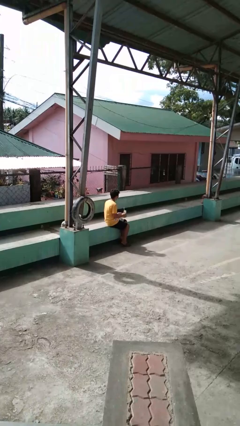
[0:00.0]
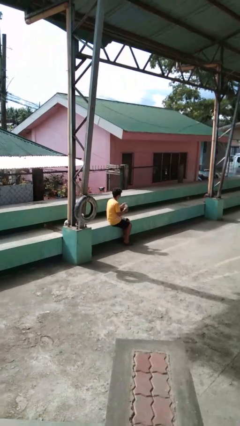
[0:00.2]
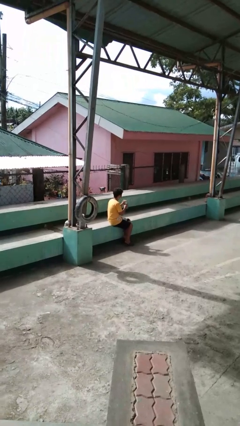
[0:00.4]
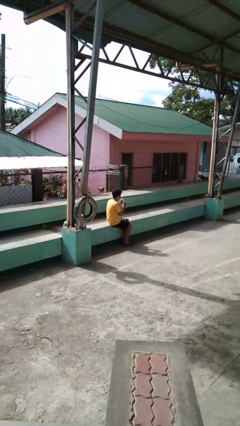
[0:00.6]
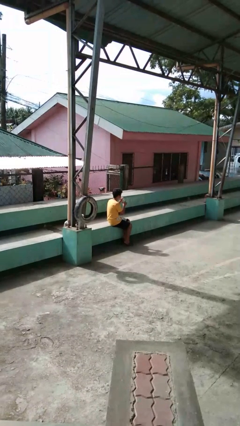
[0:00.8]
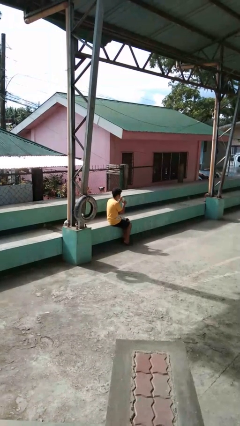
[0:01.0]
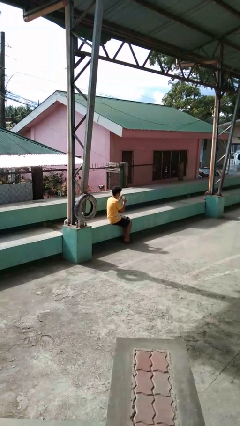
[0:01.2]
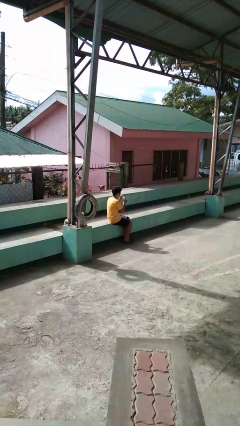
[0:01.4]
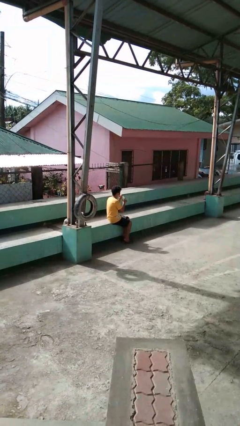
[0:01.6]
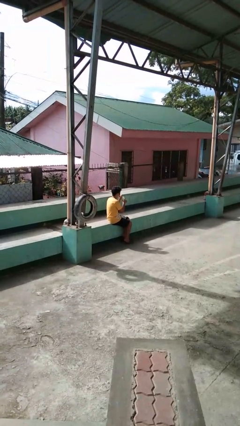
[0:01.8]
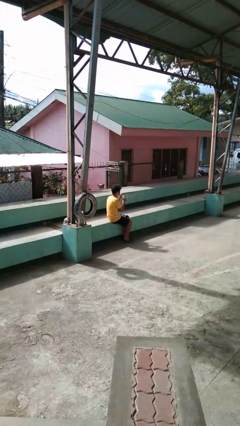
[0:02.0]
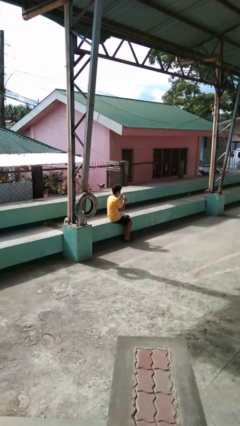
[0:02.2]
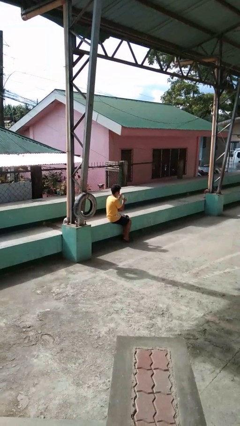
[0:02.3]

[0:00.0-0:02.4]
person drinks from straw

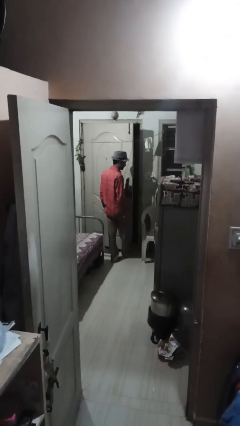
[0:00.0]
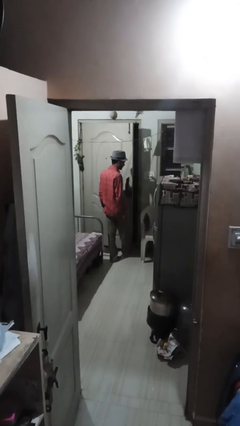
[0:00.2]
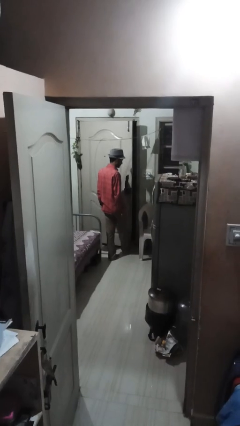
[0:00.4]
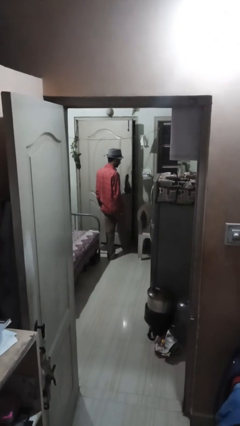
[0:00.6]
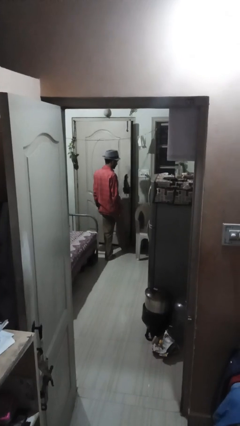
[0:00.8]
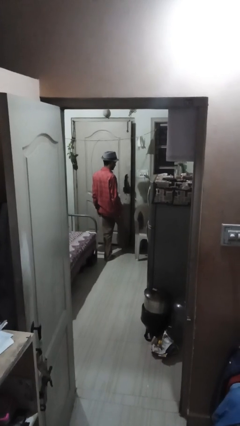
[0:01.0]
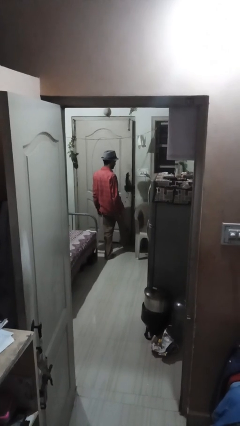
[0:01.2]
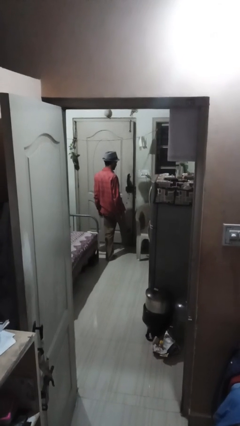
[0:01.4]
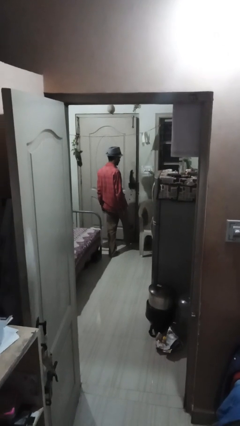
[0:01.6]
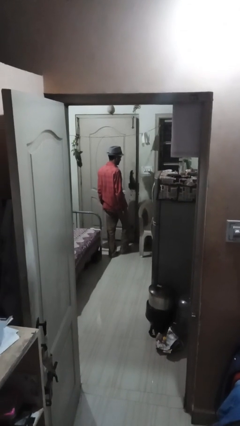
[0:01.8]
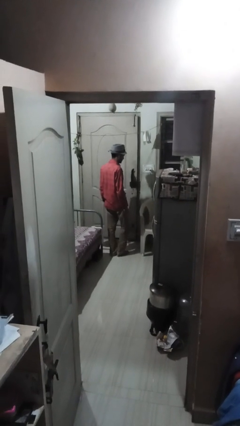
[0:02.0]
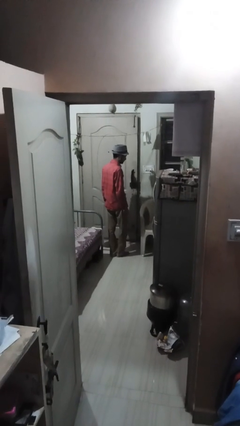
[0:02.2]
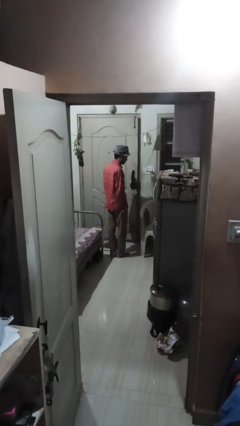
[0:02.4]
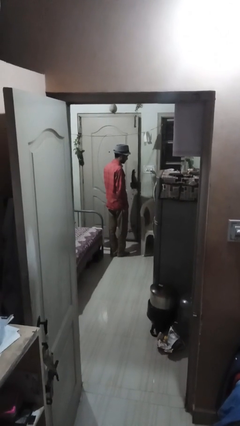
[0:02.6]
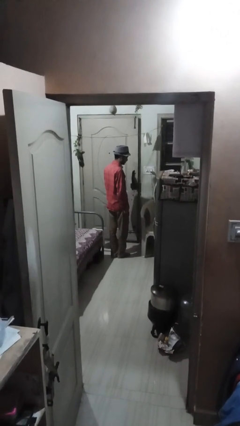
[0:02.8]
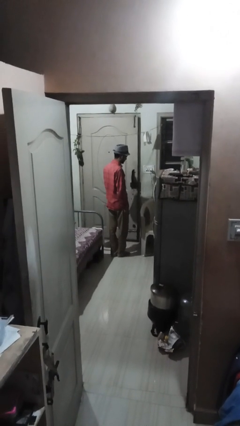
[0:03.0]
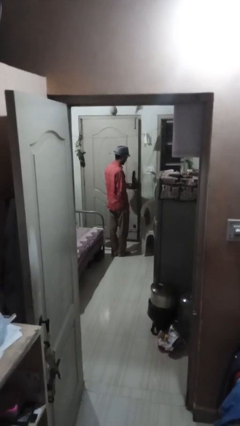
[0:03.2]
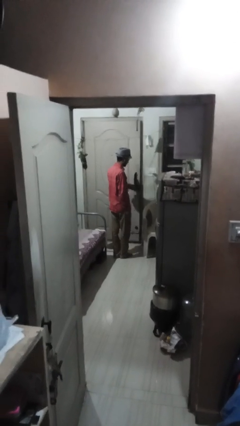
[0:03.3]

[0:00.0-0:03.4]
person closes door with foot

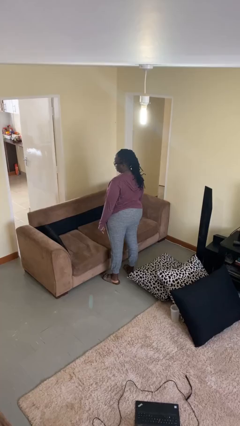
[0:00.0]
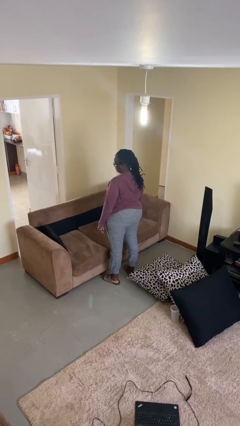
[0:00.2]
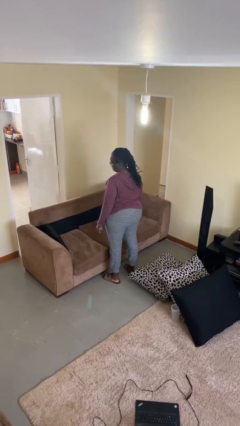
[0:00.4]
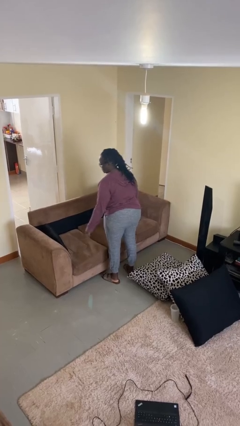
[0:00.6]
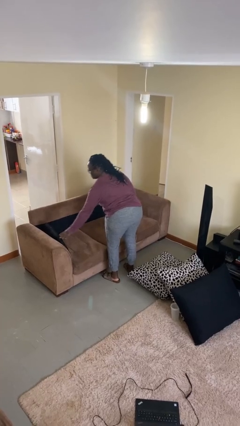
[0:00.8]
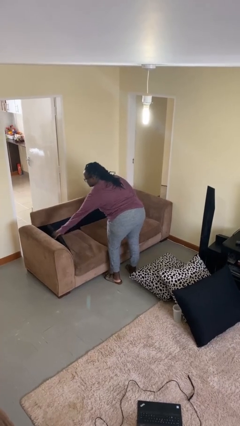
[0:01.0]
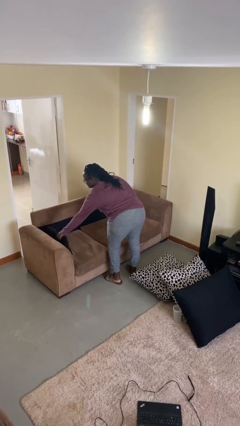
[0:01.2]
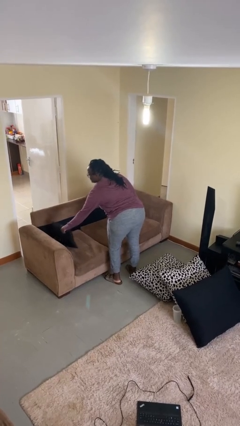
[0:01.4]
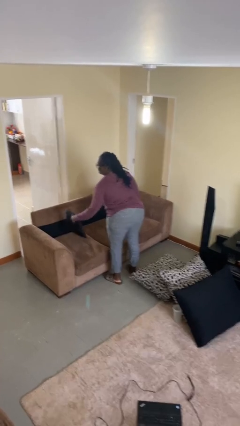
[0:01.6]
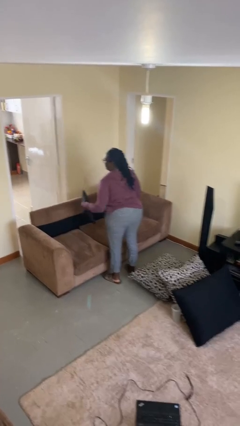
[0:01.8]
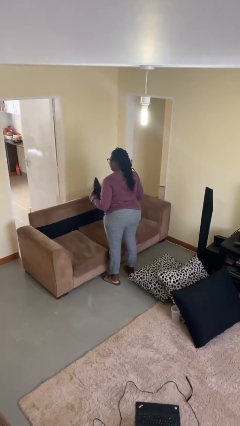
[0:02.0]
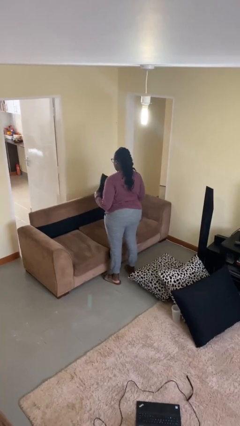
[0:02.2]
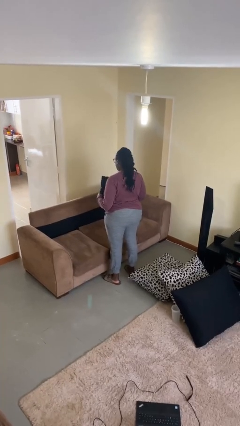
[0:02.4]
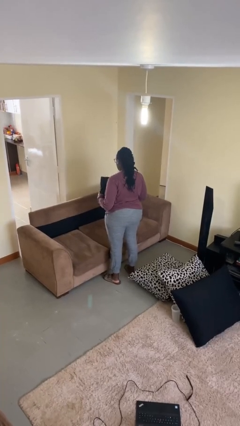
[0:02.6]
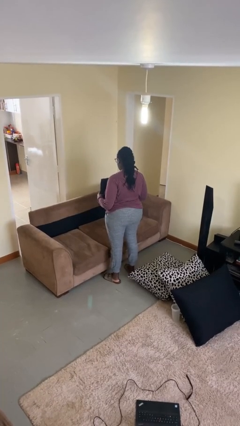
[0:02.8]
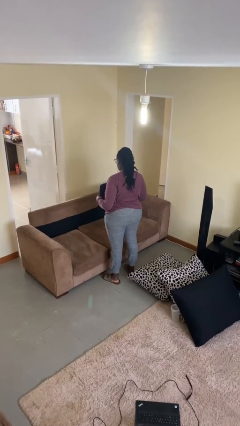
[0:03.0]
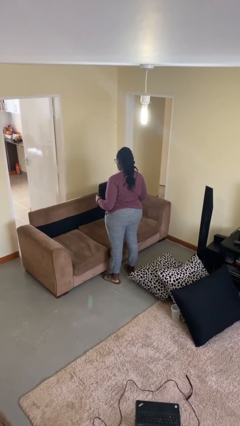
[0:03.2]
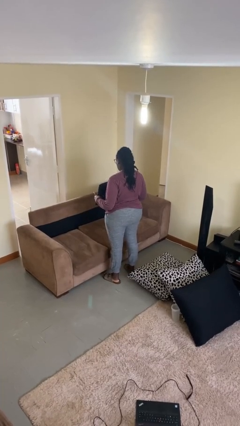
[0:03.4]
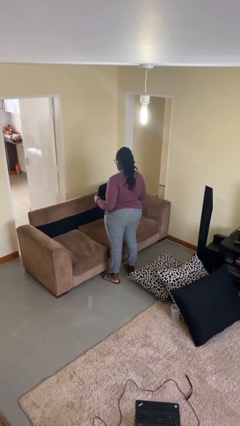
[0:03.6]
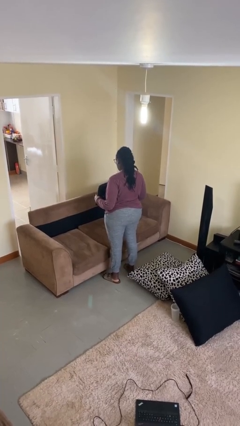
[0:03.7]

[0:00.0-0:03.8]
person picks up object from couch

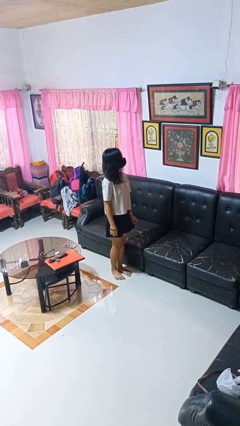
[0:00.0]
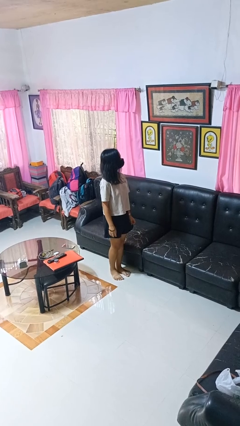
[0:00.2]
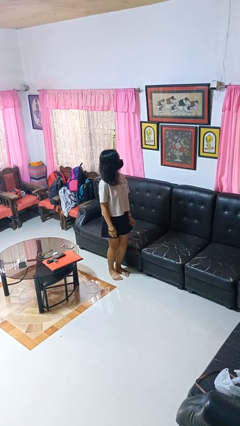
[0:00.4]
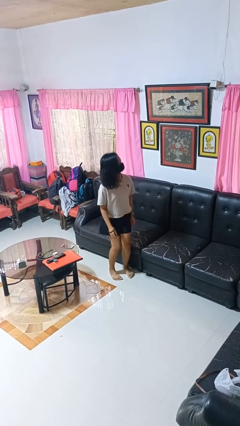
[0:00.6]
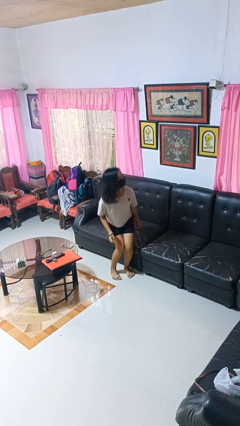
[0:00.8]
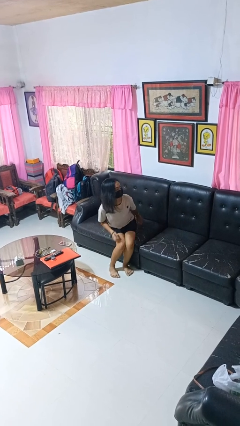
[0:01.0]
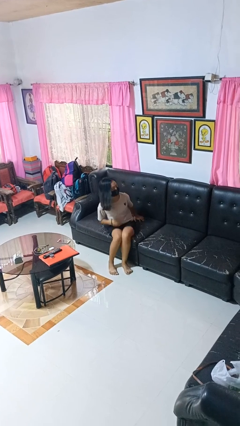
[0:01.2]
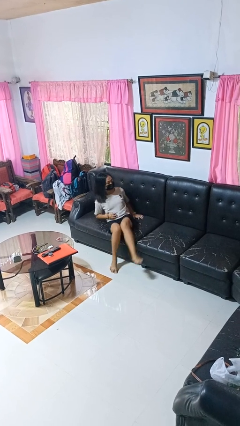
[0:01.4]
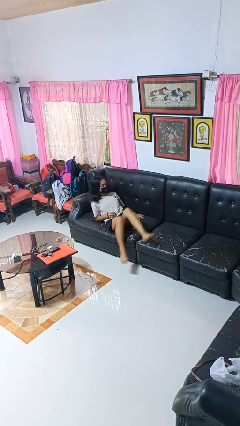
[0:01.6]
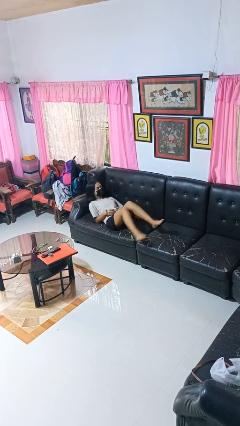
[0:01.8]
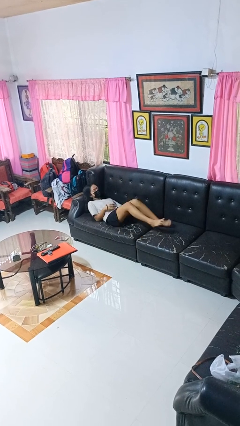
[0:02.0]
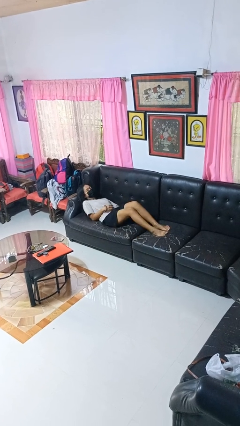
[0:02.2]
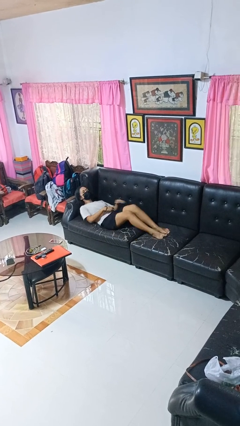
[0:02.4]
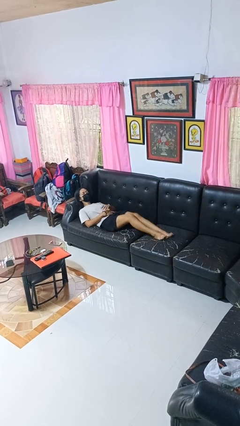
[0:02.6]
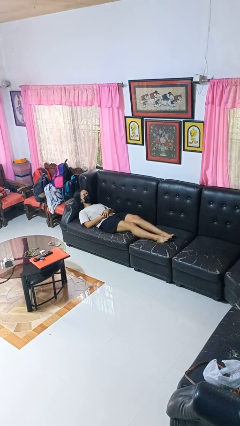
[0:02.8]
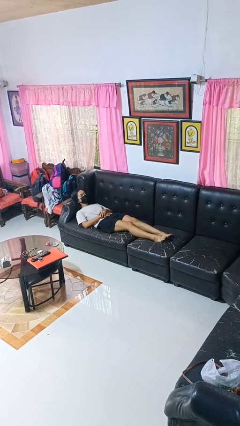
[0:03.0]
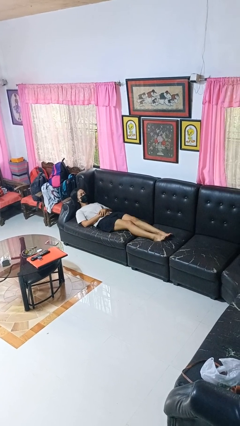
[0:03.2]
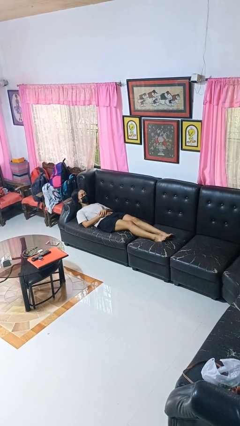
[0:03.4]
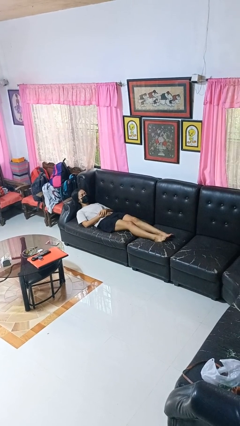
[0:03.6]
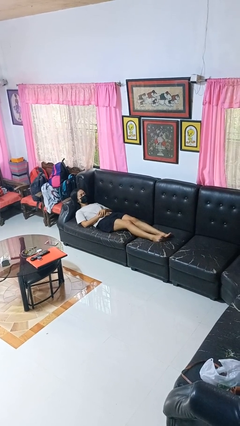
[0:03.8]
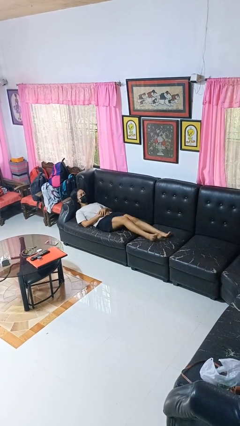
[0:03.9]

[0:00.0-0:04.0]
person lies down on couch

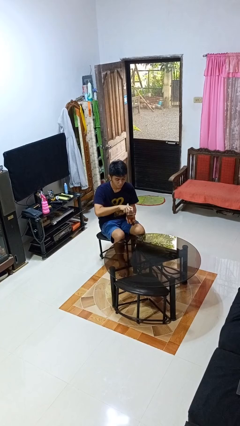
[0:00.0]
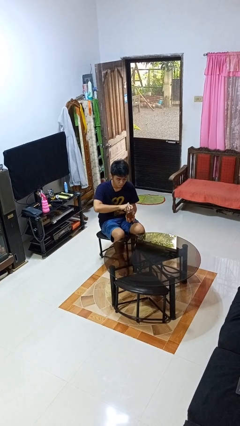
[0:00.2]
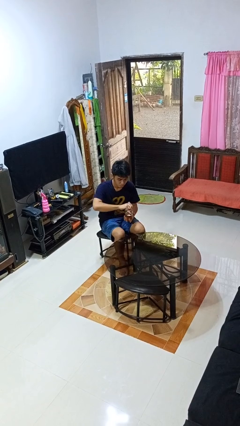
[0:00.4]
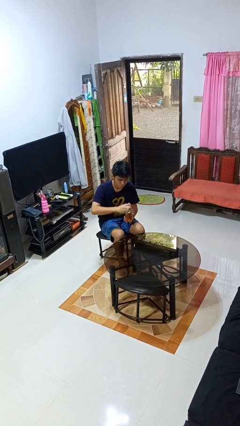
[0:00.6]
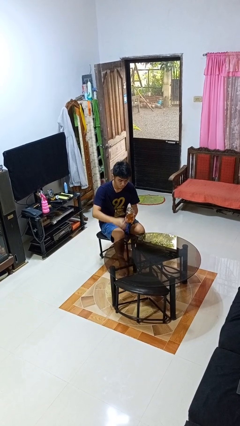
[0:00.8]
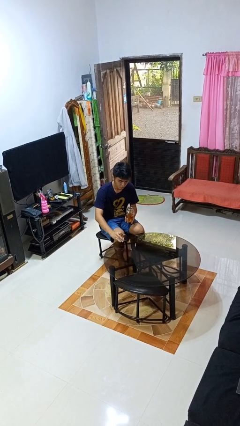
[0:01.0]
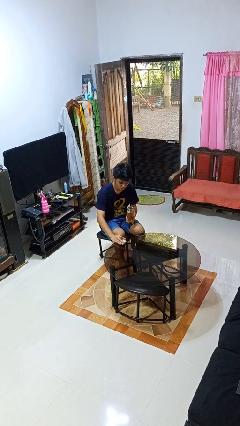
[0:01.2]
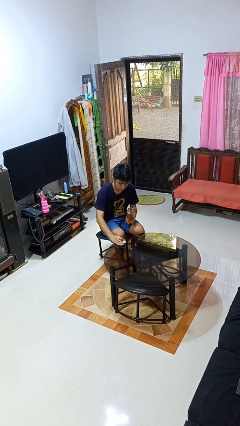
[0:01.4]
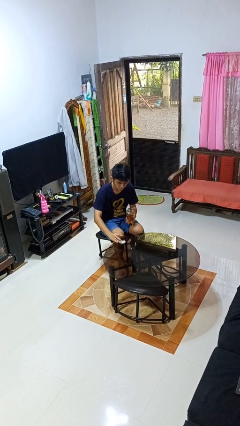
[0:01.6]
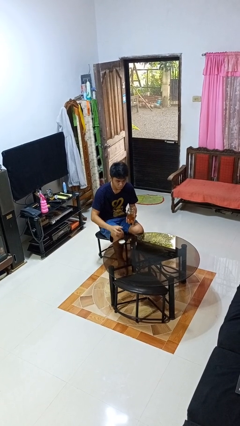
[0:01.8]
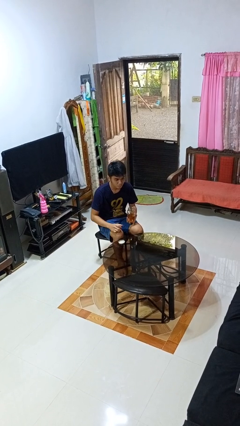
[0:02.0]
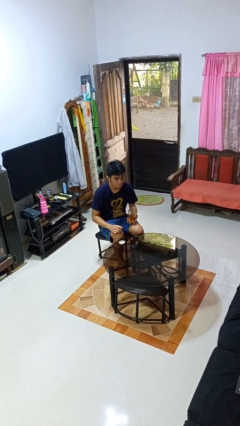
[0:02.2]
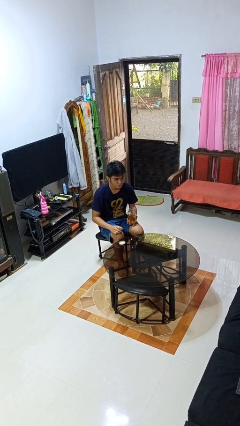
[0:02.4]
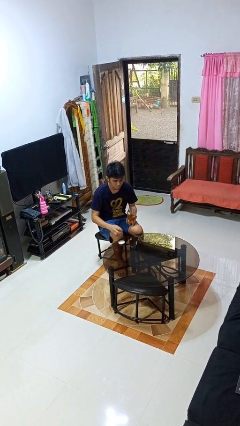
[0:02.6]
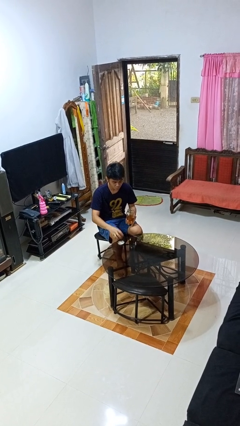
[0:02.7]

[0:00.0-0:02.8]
person opens jar

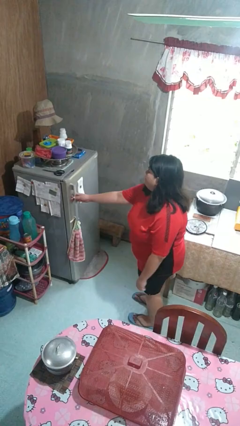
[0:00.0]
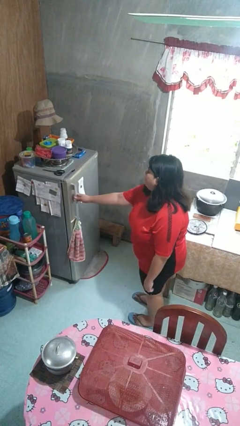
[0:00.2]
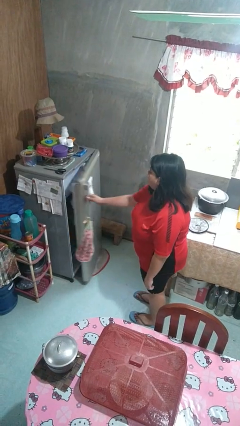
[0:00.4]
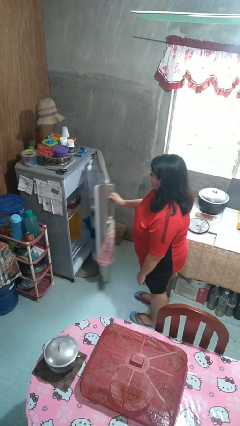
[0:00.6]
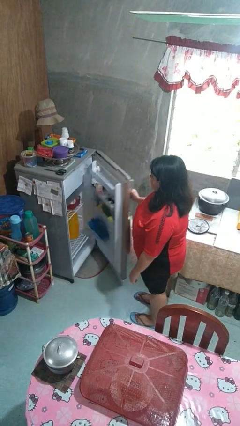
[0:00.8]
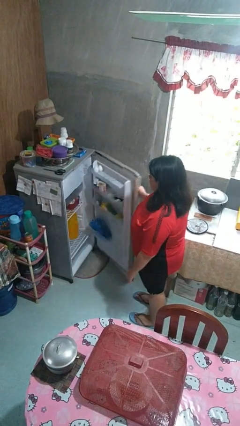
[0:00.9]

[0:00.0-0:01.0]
person opens refrigerator

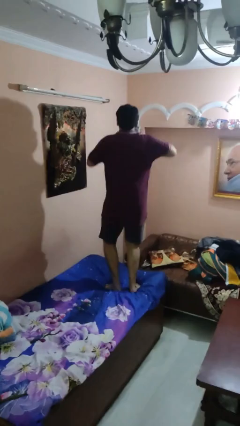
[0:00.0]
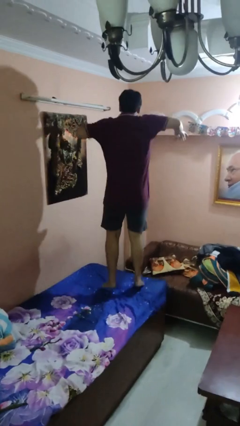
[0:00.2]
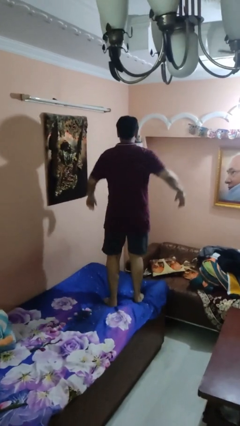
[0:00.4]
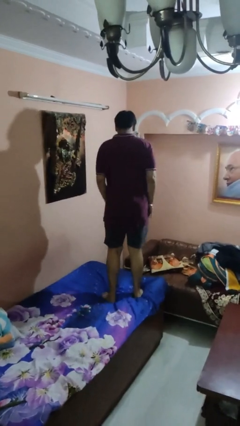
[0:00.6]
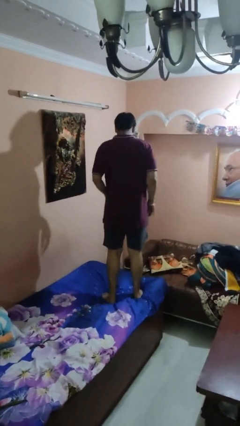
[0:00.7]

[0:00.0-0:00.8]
person jumps on bed
